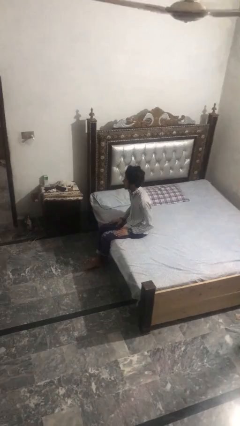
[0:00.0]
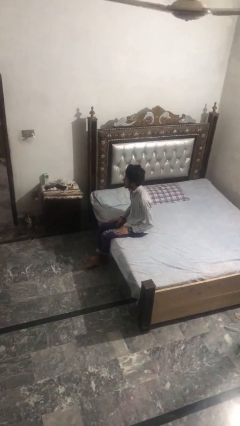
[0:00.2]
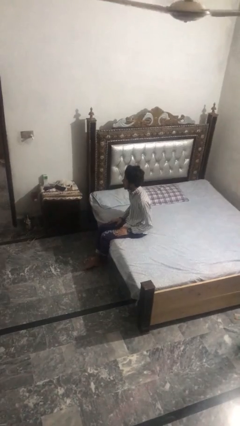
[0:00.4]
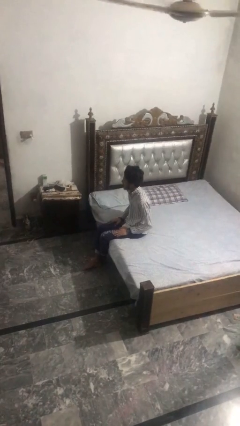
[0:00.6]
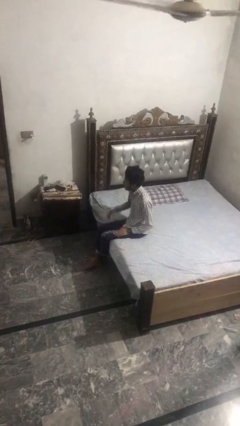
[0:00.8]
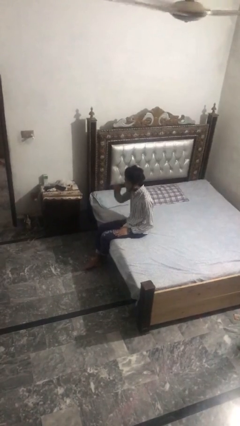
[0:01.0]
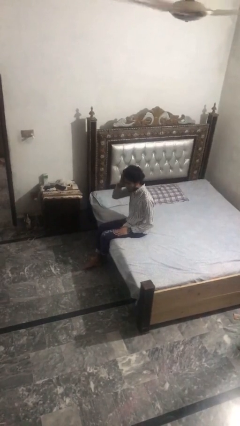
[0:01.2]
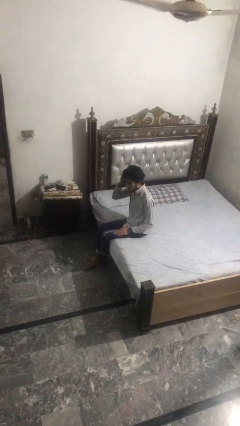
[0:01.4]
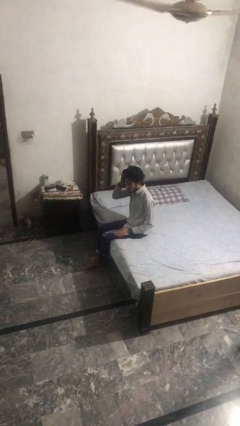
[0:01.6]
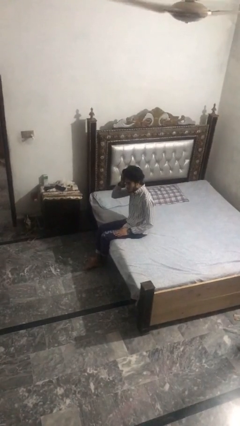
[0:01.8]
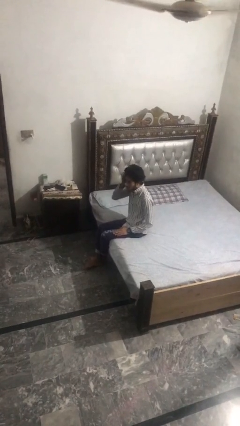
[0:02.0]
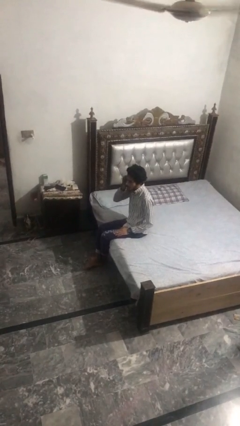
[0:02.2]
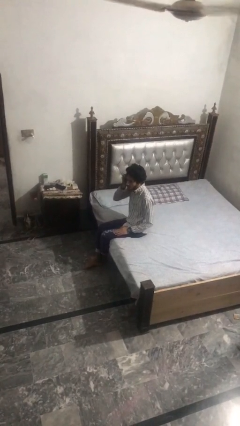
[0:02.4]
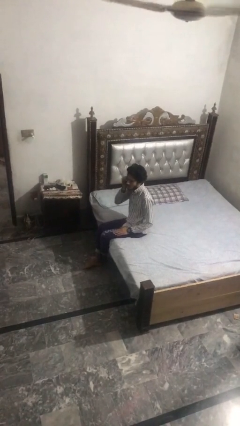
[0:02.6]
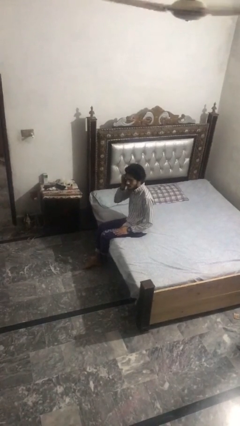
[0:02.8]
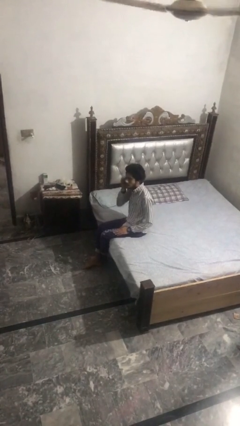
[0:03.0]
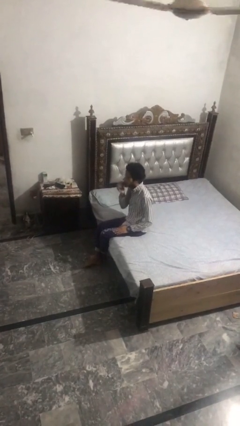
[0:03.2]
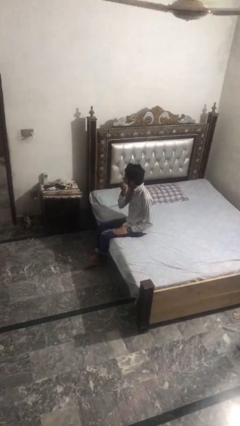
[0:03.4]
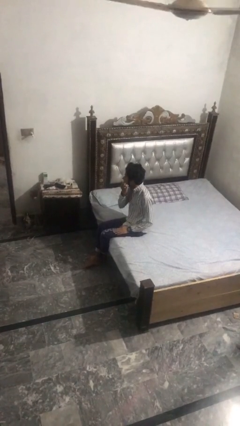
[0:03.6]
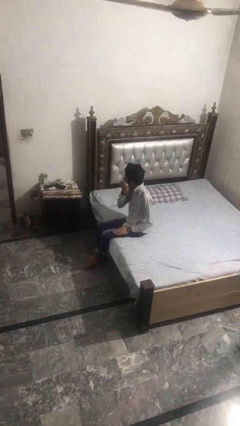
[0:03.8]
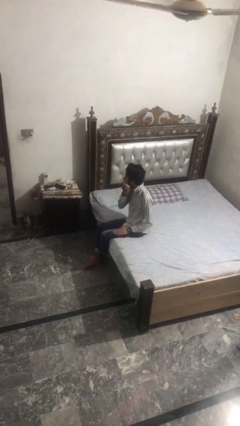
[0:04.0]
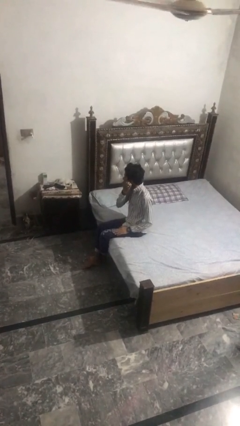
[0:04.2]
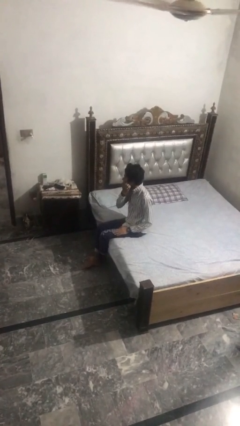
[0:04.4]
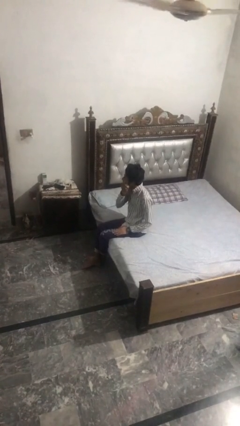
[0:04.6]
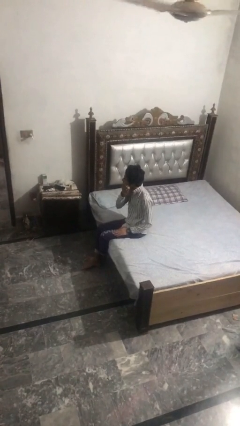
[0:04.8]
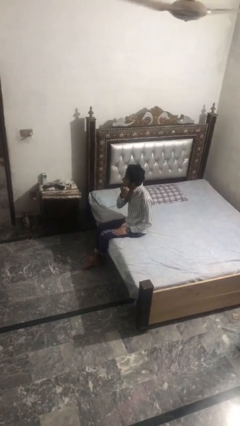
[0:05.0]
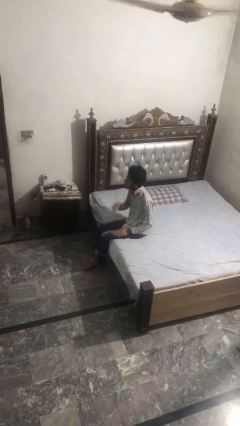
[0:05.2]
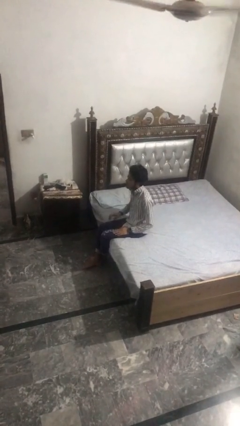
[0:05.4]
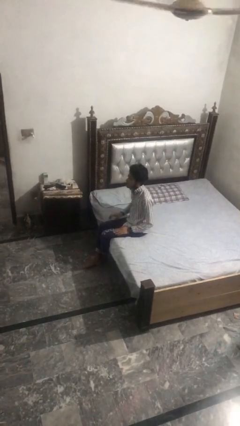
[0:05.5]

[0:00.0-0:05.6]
person scratches face

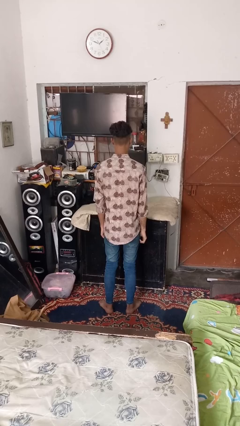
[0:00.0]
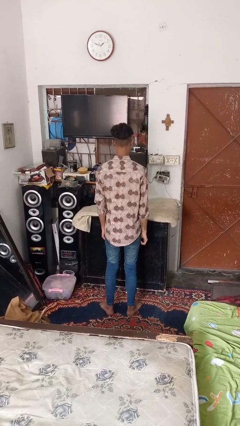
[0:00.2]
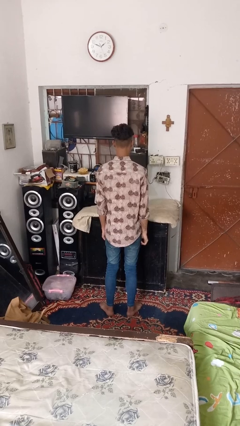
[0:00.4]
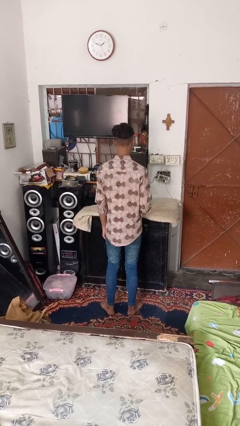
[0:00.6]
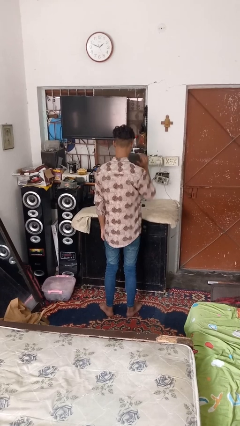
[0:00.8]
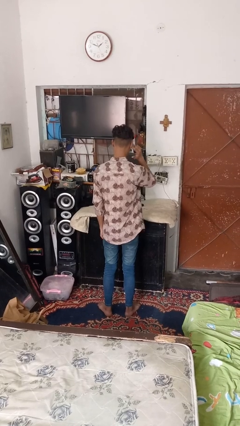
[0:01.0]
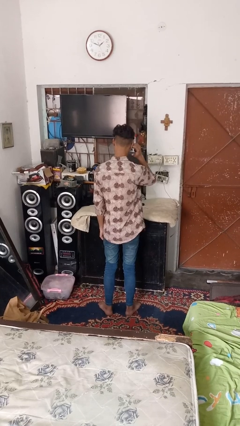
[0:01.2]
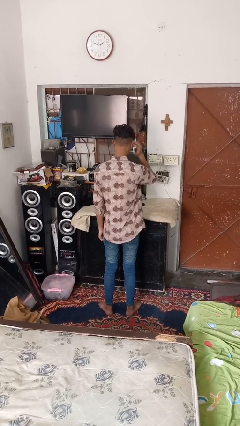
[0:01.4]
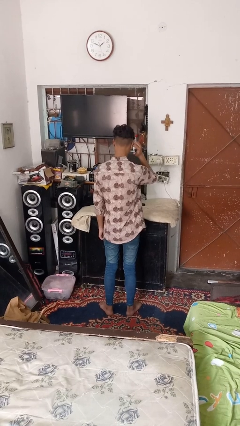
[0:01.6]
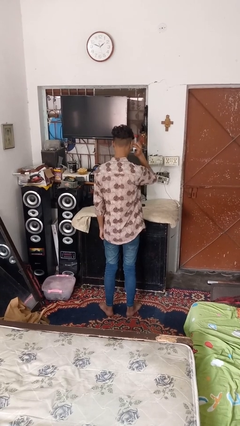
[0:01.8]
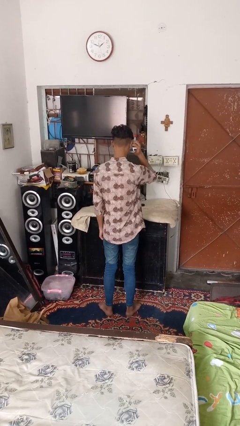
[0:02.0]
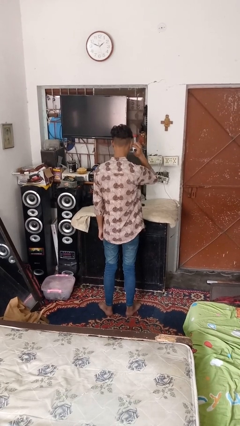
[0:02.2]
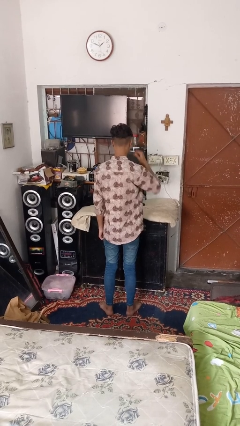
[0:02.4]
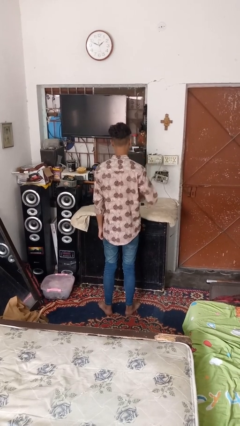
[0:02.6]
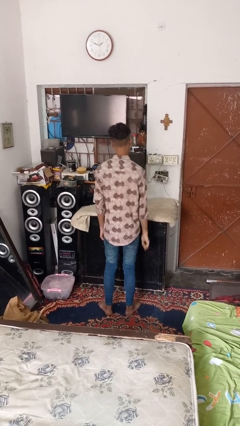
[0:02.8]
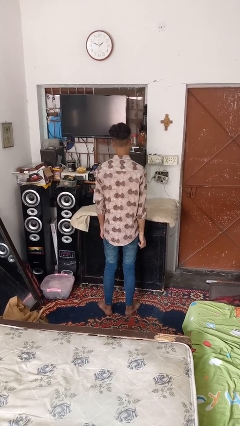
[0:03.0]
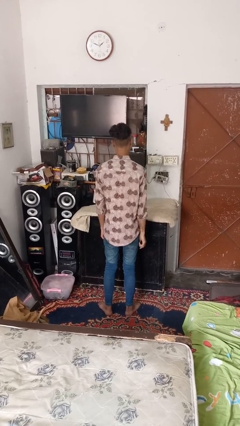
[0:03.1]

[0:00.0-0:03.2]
person puts fingers in ear

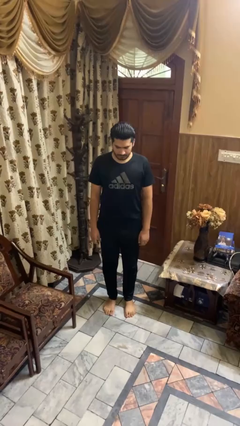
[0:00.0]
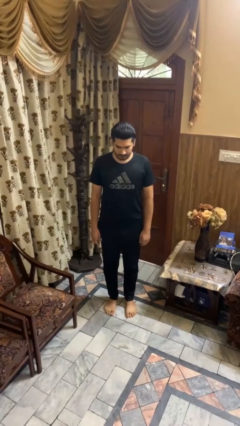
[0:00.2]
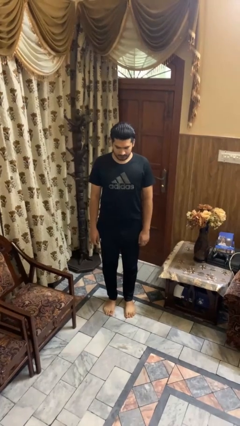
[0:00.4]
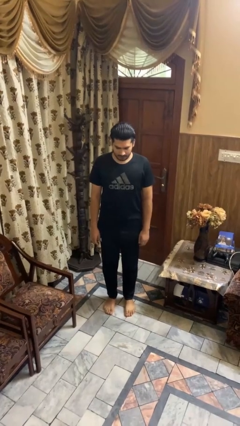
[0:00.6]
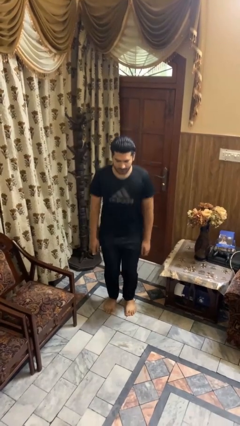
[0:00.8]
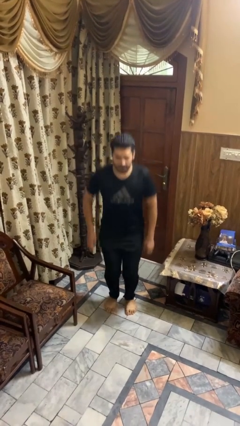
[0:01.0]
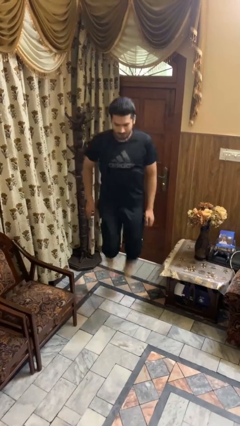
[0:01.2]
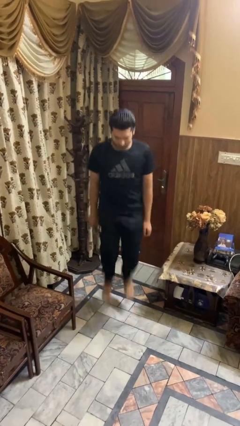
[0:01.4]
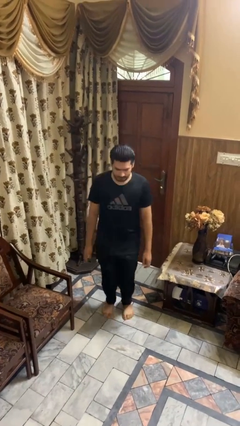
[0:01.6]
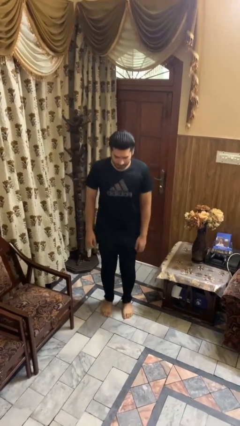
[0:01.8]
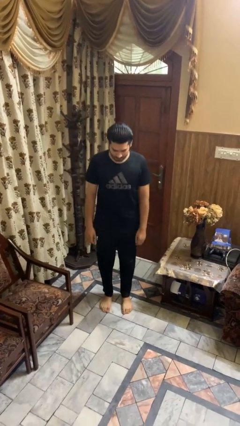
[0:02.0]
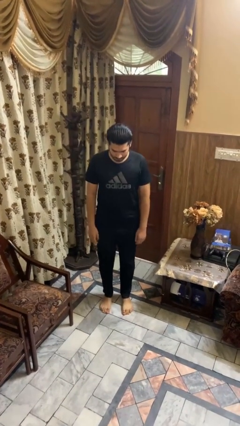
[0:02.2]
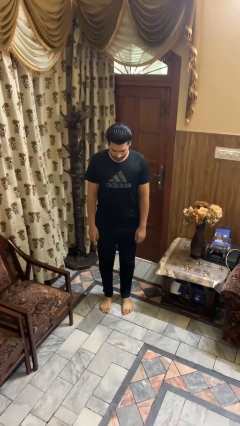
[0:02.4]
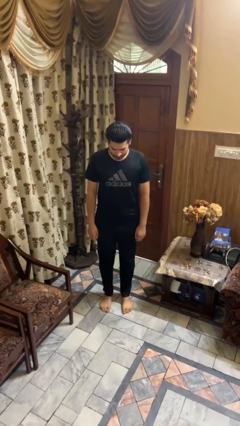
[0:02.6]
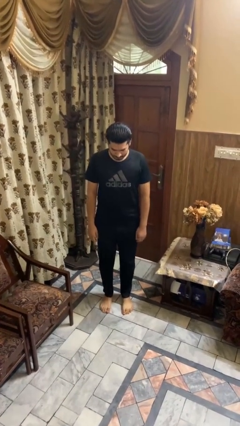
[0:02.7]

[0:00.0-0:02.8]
person jumps

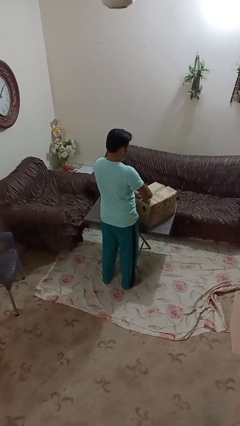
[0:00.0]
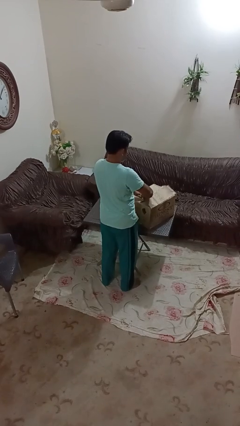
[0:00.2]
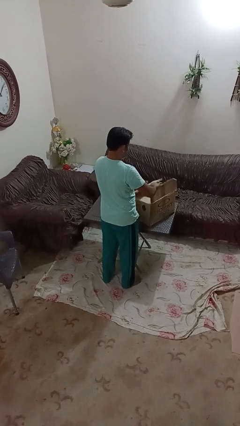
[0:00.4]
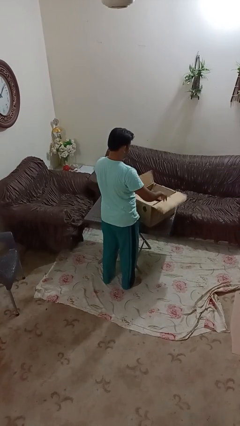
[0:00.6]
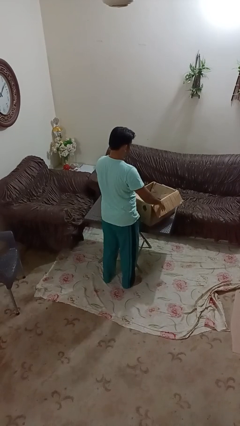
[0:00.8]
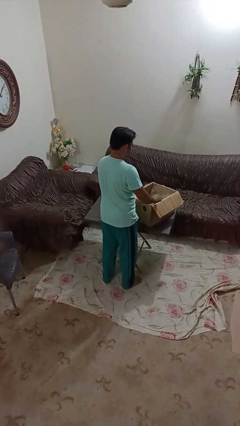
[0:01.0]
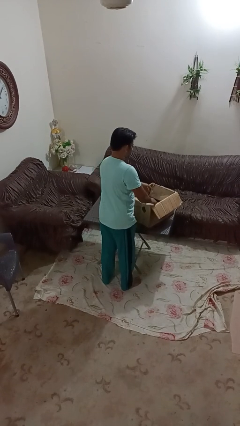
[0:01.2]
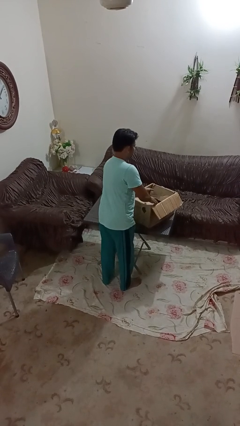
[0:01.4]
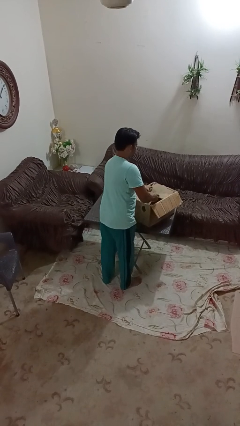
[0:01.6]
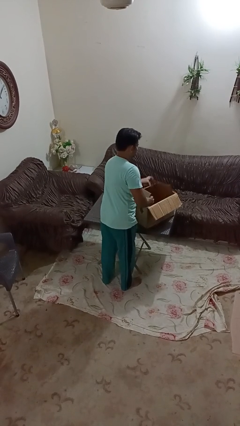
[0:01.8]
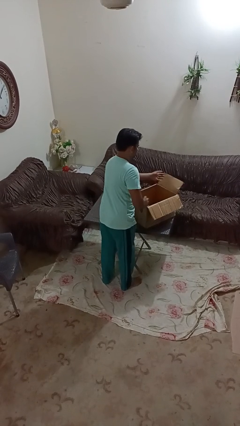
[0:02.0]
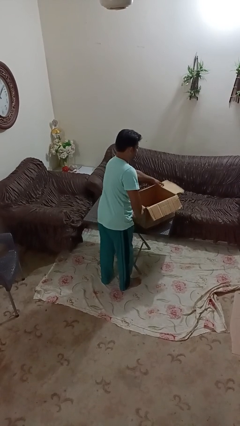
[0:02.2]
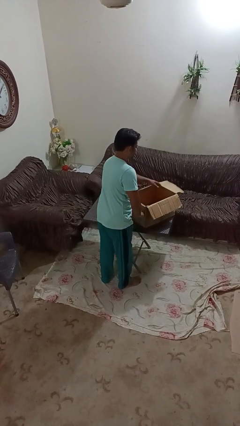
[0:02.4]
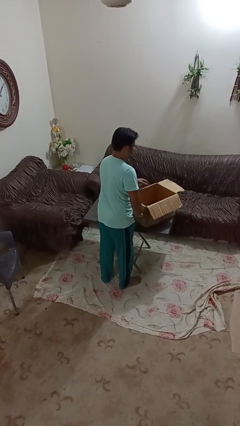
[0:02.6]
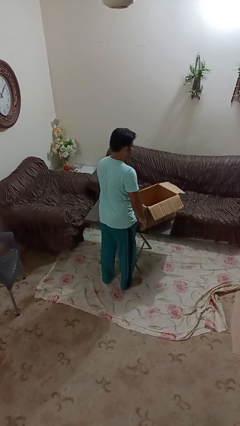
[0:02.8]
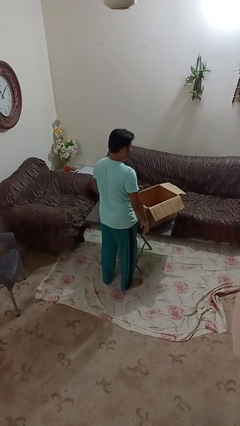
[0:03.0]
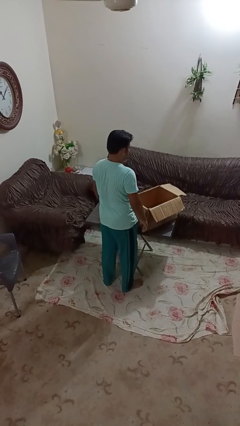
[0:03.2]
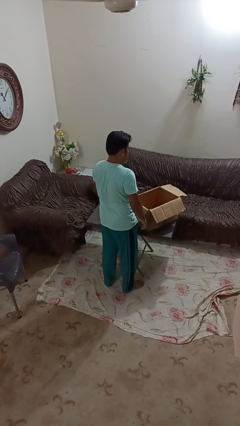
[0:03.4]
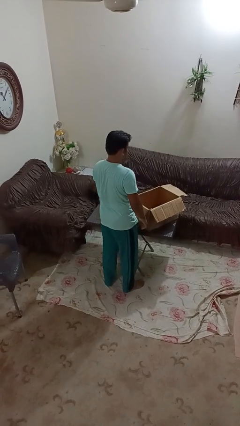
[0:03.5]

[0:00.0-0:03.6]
person opens box

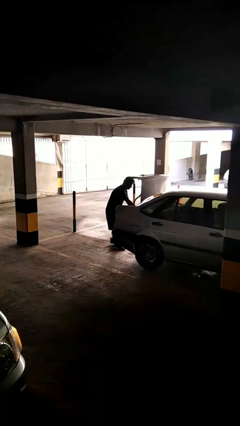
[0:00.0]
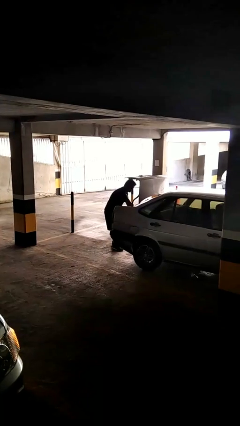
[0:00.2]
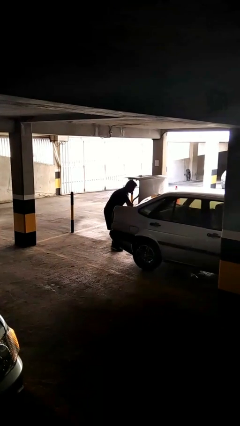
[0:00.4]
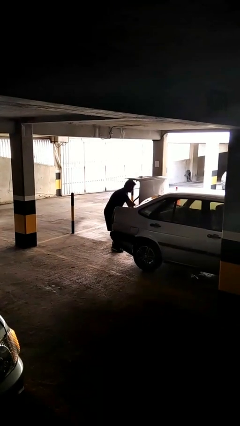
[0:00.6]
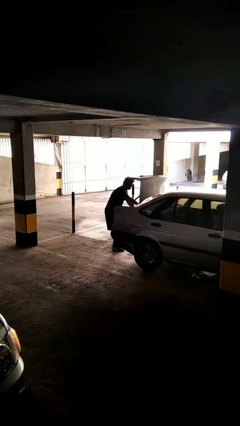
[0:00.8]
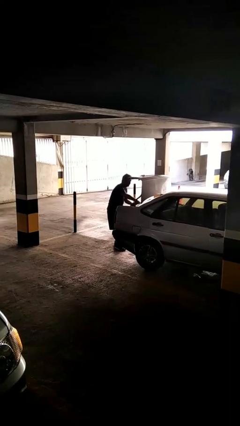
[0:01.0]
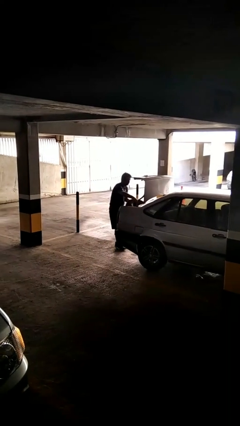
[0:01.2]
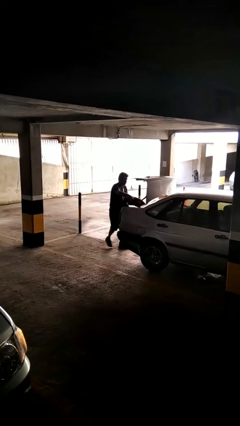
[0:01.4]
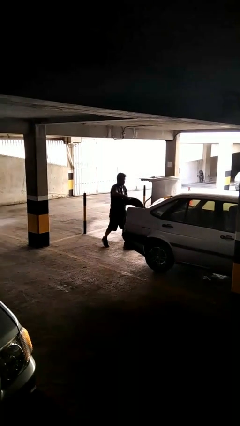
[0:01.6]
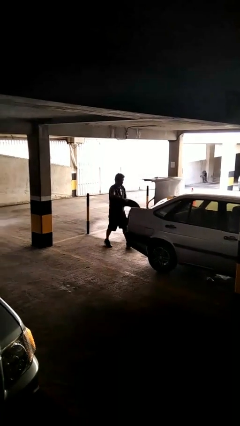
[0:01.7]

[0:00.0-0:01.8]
person unloads car

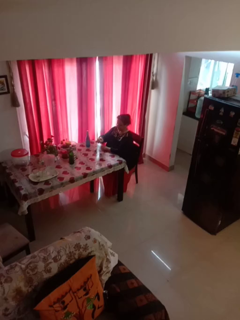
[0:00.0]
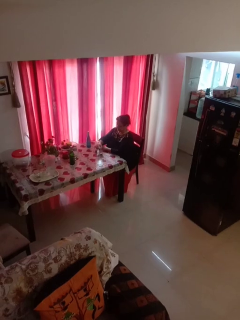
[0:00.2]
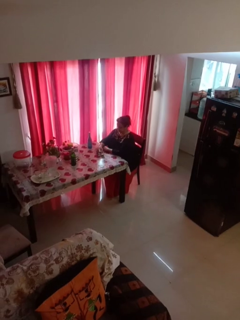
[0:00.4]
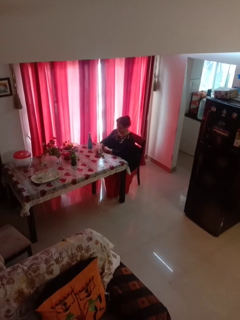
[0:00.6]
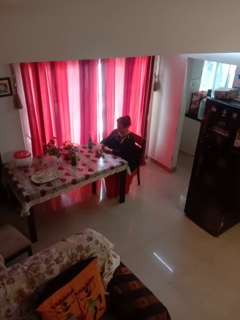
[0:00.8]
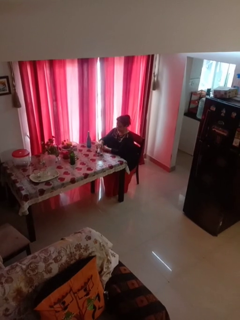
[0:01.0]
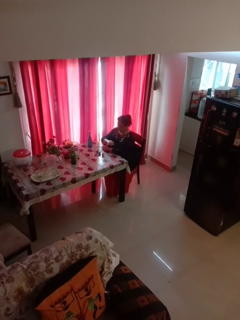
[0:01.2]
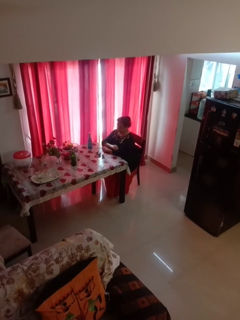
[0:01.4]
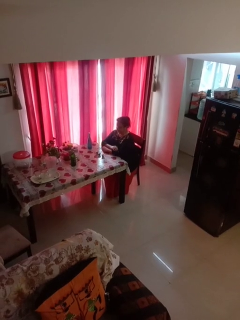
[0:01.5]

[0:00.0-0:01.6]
person puts down object on table
